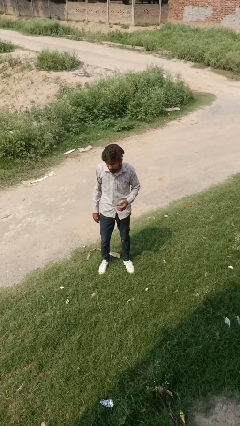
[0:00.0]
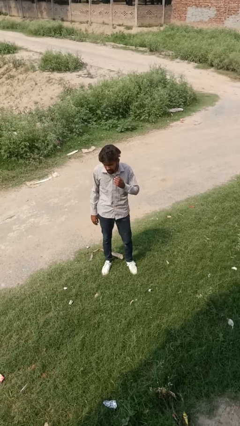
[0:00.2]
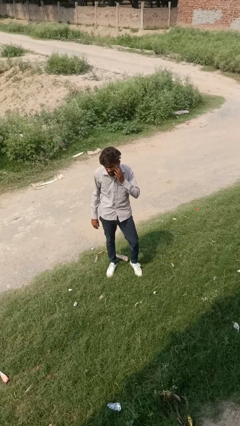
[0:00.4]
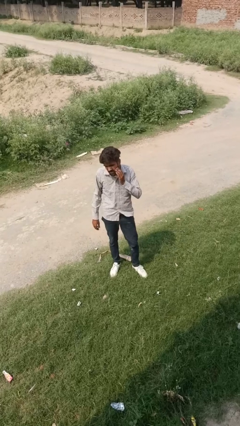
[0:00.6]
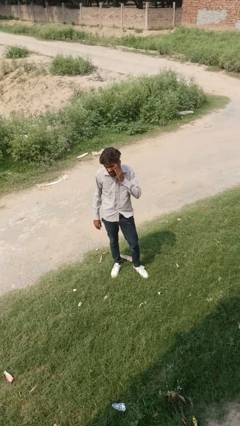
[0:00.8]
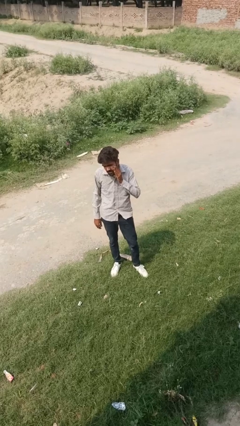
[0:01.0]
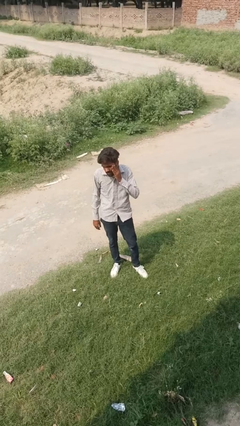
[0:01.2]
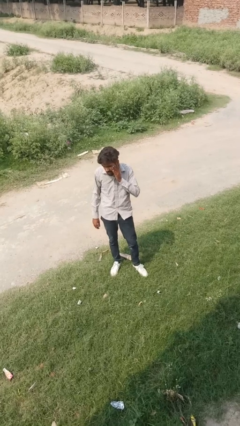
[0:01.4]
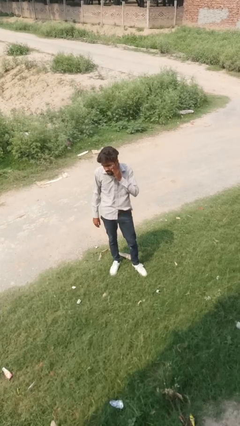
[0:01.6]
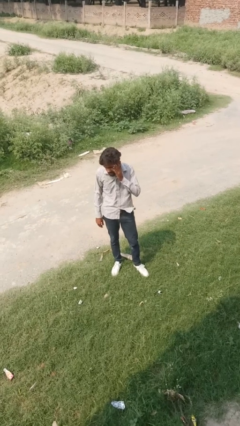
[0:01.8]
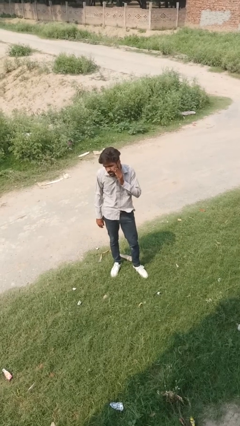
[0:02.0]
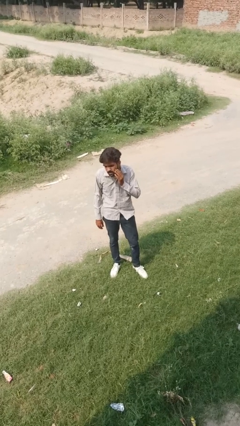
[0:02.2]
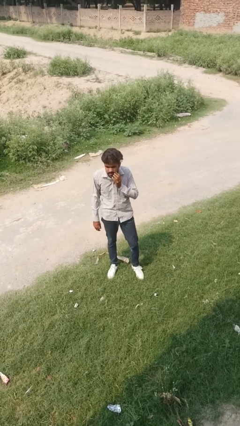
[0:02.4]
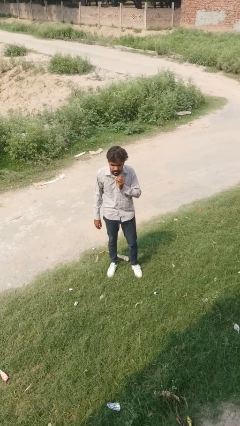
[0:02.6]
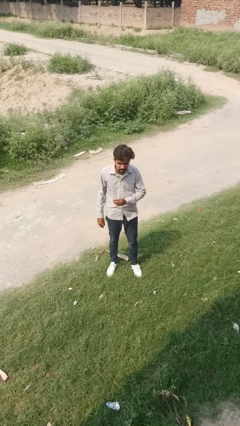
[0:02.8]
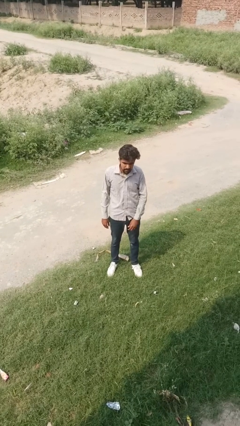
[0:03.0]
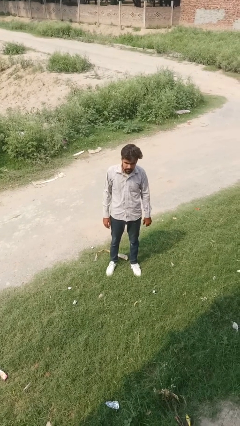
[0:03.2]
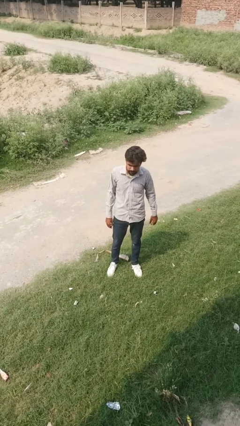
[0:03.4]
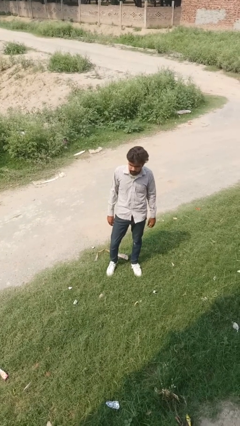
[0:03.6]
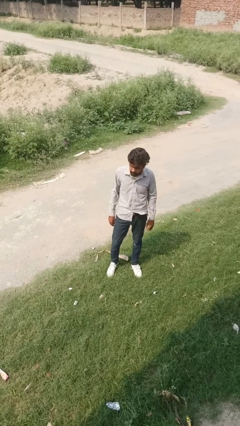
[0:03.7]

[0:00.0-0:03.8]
person scratches face

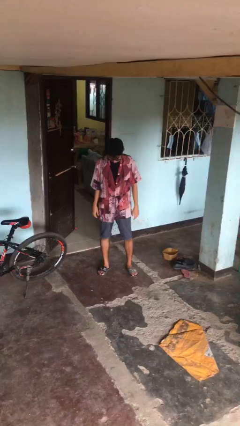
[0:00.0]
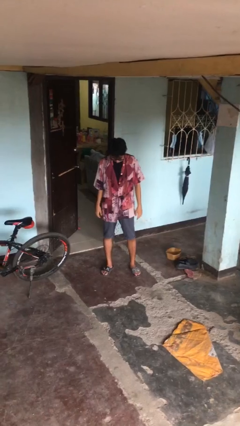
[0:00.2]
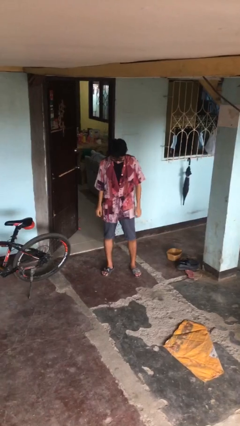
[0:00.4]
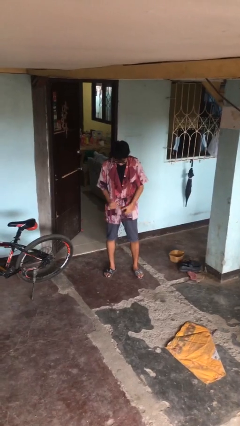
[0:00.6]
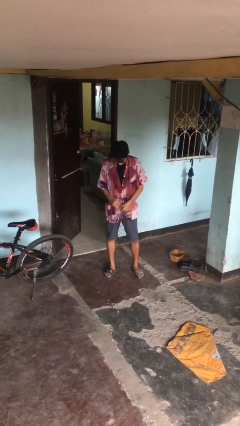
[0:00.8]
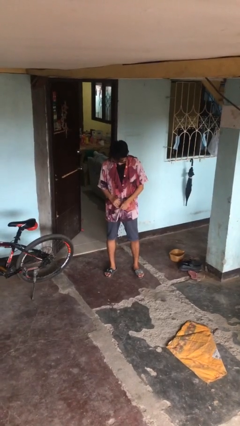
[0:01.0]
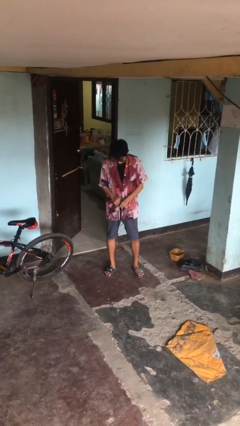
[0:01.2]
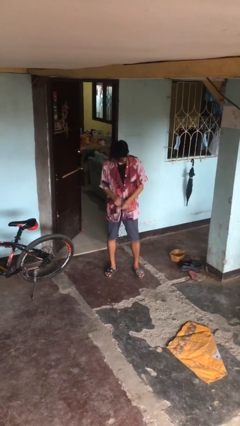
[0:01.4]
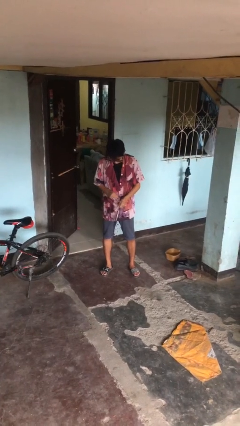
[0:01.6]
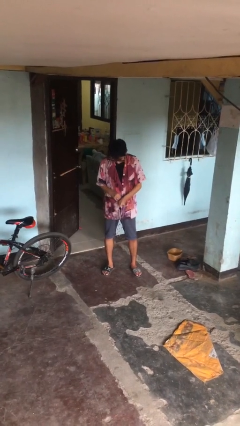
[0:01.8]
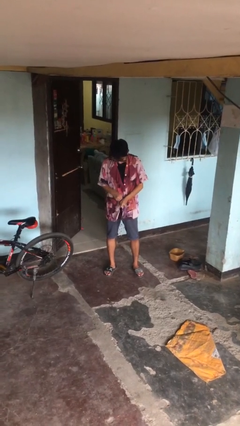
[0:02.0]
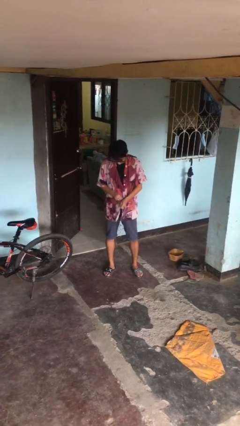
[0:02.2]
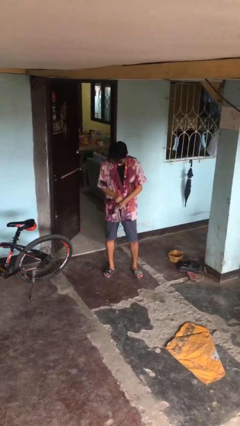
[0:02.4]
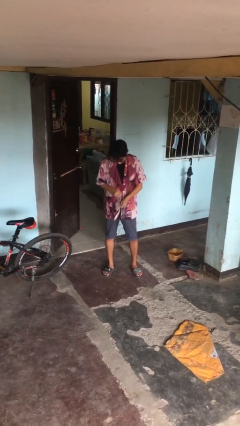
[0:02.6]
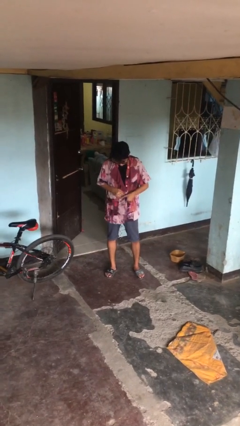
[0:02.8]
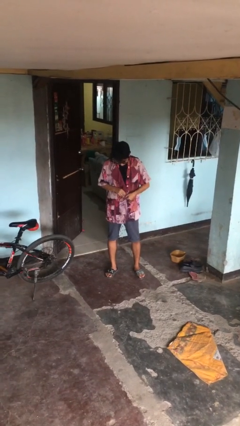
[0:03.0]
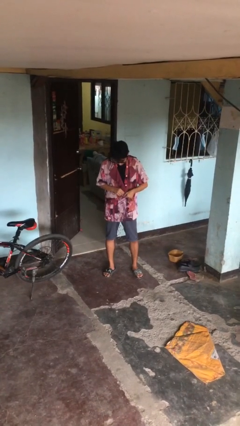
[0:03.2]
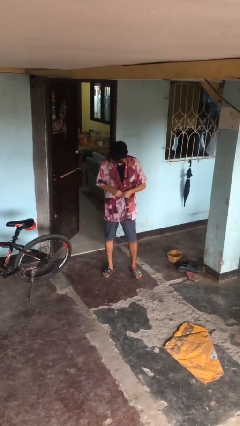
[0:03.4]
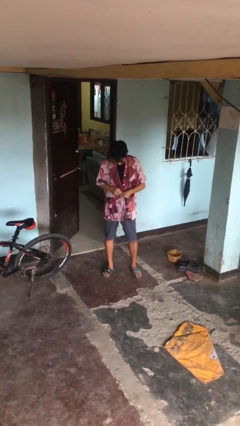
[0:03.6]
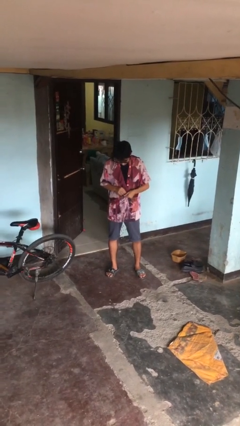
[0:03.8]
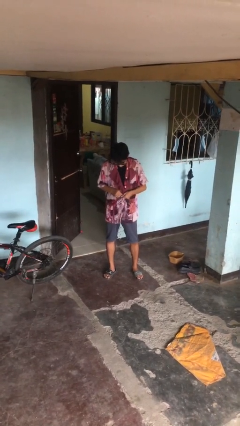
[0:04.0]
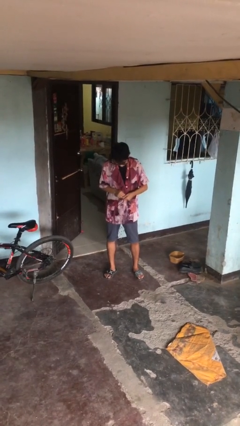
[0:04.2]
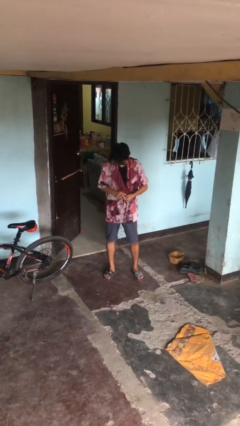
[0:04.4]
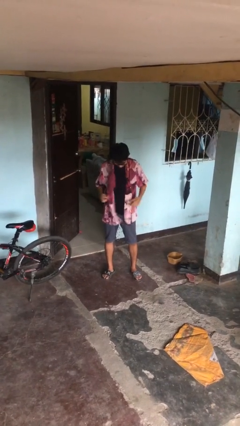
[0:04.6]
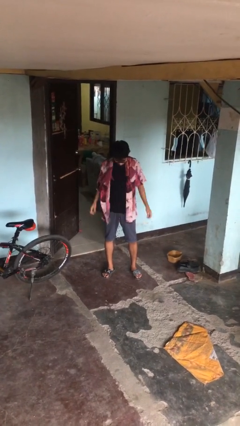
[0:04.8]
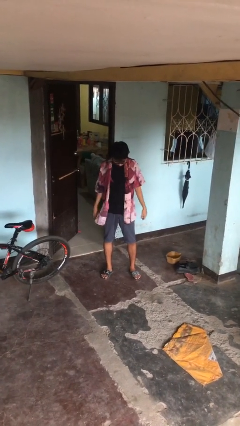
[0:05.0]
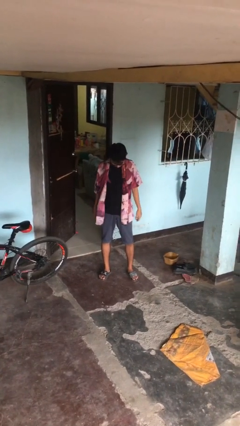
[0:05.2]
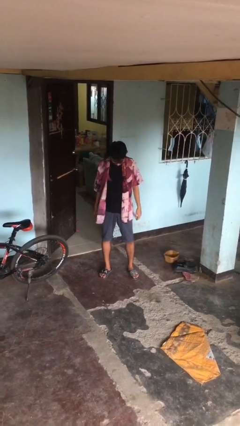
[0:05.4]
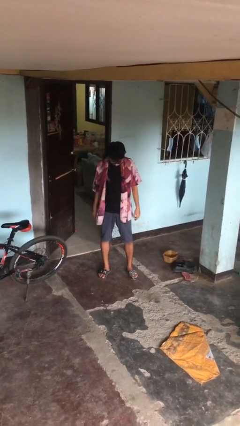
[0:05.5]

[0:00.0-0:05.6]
person unbuttons shirt

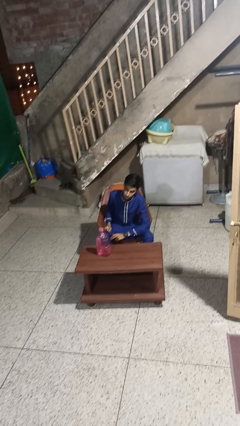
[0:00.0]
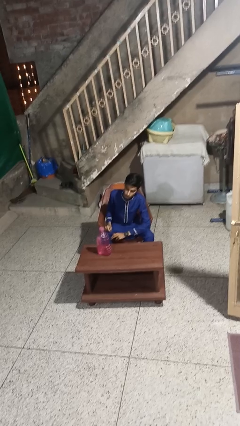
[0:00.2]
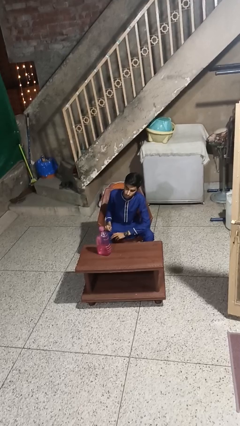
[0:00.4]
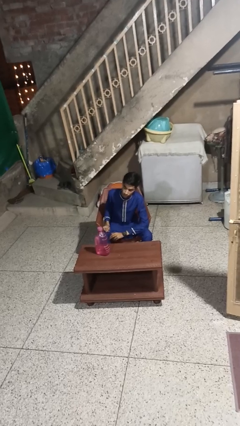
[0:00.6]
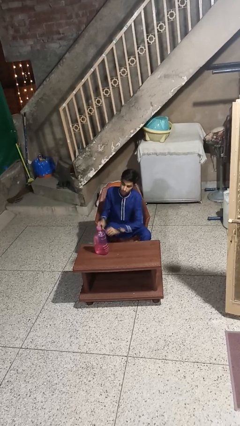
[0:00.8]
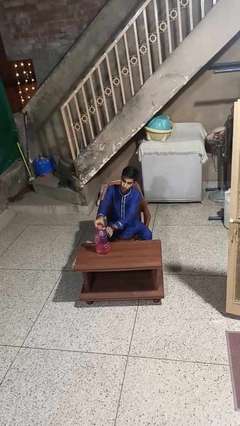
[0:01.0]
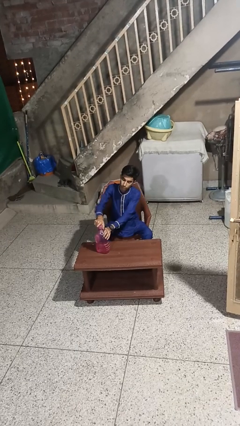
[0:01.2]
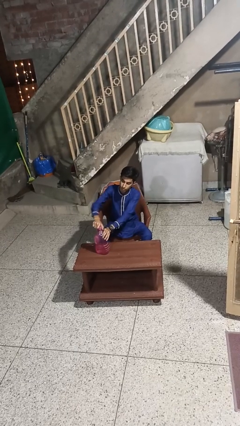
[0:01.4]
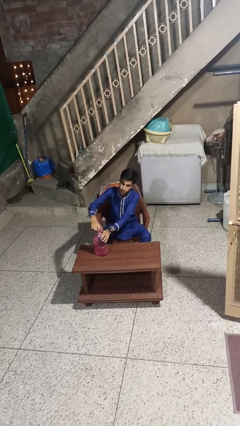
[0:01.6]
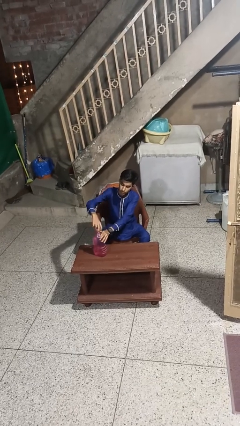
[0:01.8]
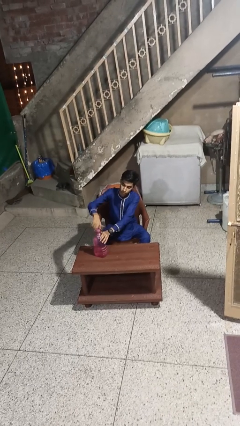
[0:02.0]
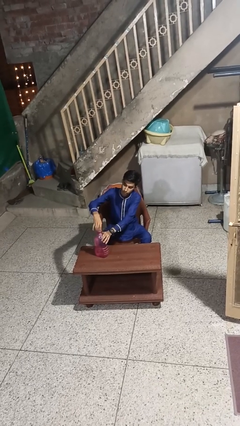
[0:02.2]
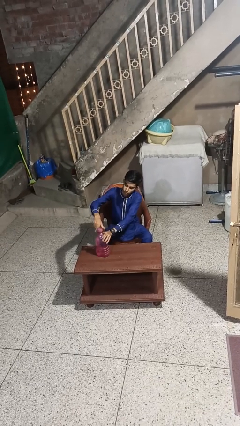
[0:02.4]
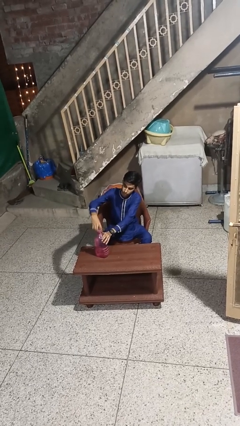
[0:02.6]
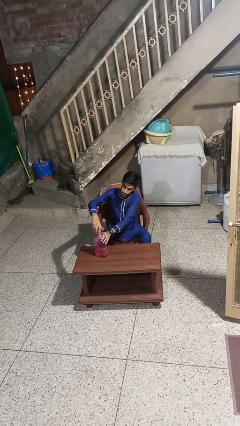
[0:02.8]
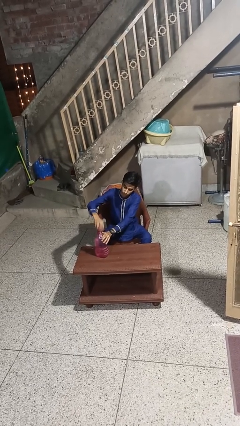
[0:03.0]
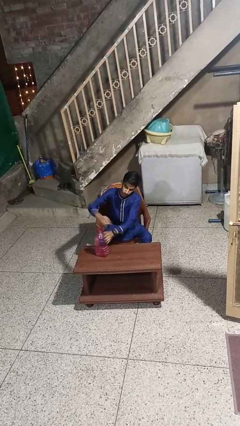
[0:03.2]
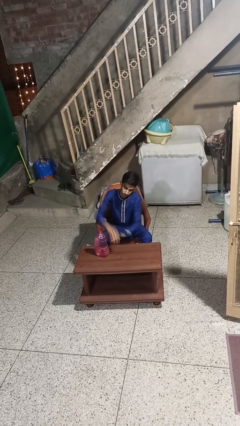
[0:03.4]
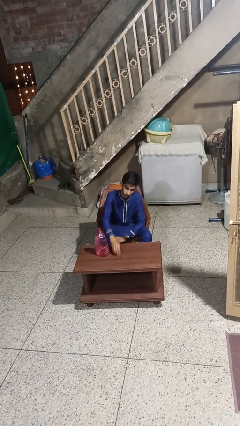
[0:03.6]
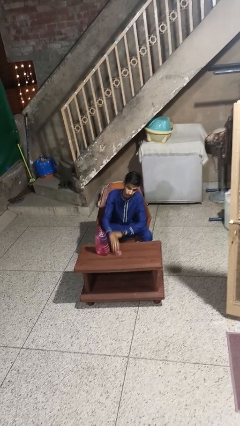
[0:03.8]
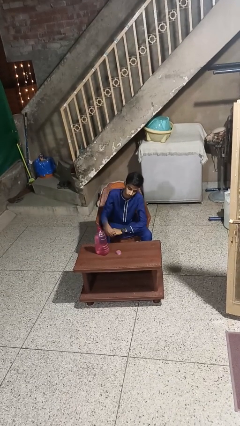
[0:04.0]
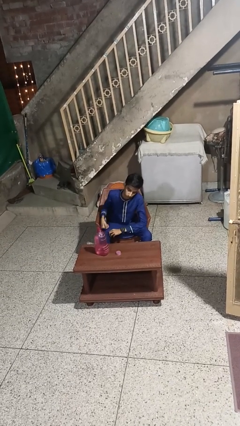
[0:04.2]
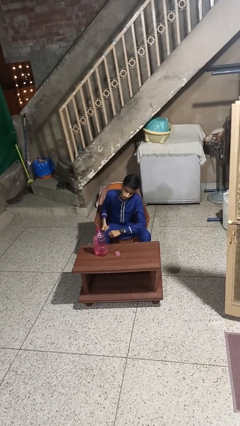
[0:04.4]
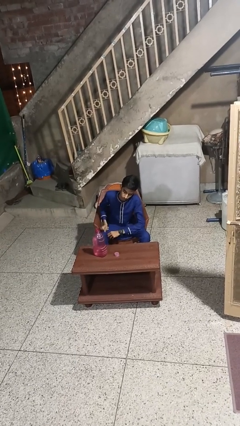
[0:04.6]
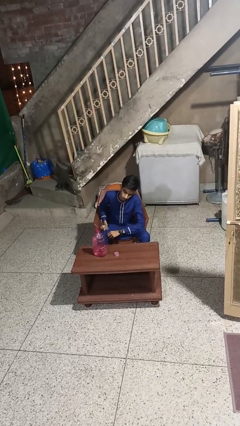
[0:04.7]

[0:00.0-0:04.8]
person unscrews lid from bottle

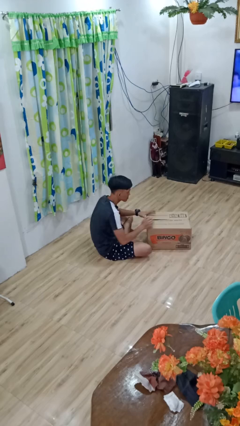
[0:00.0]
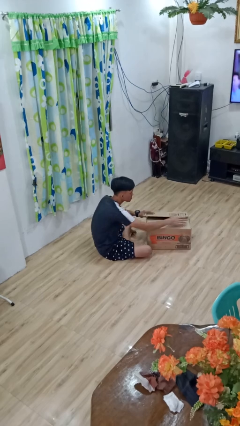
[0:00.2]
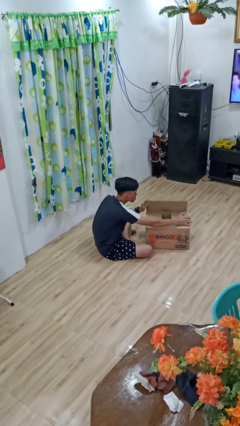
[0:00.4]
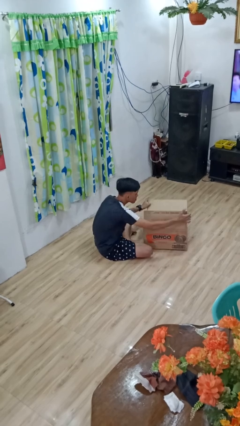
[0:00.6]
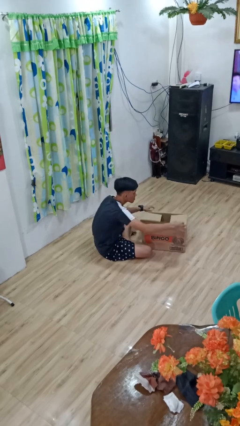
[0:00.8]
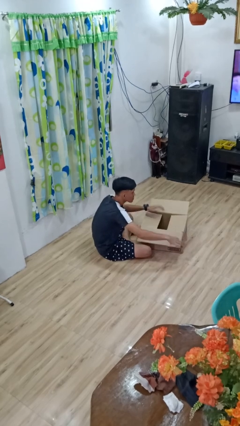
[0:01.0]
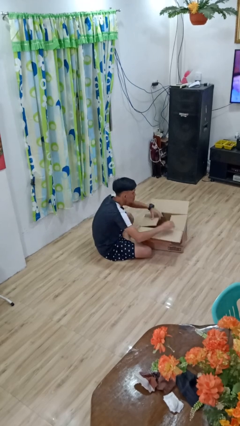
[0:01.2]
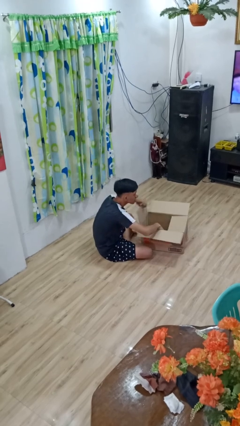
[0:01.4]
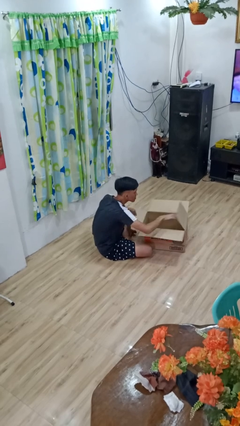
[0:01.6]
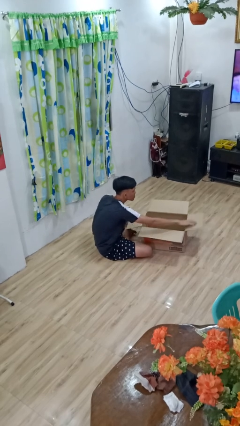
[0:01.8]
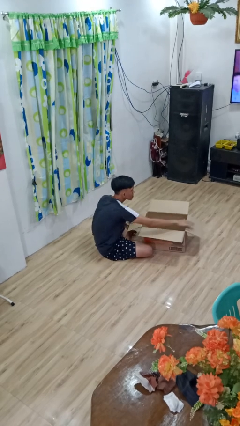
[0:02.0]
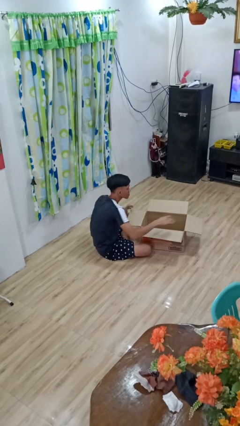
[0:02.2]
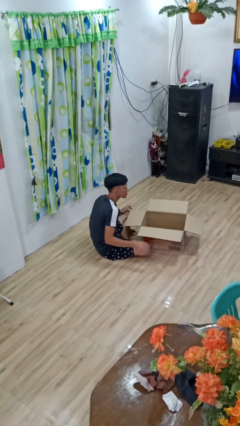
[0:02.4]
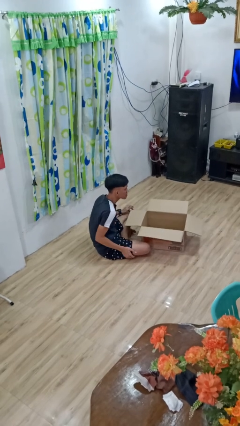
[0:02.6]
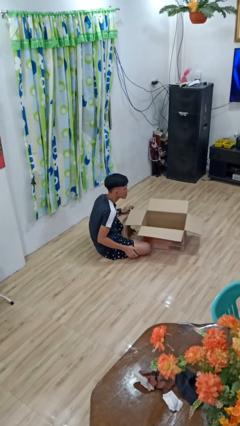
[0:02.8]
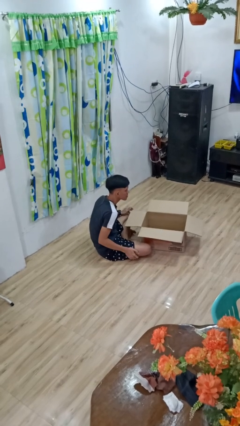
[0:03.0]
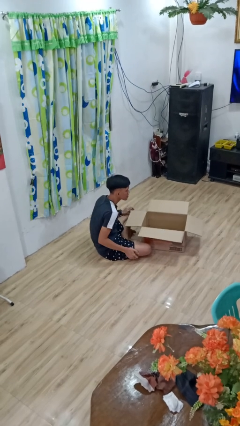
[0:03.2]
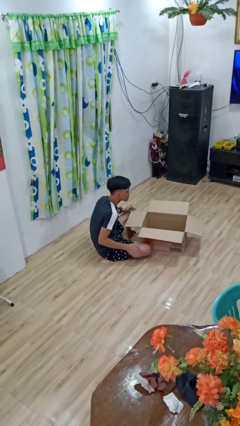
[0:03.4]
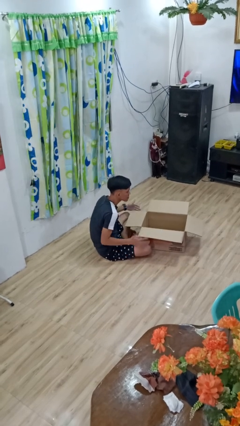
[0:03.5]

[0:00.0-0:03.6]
person opens box
